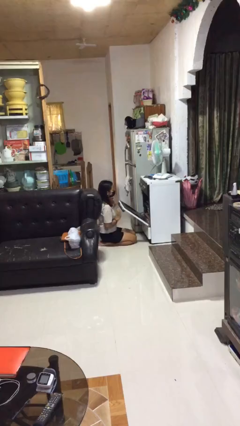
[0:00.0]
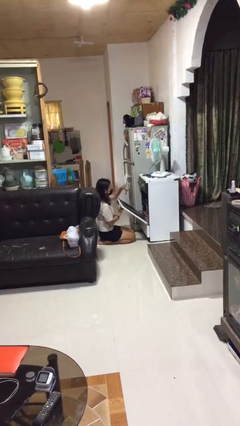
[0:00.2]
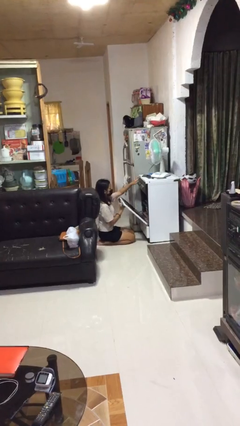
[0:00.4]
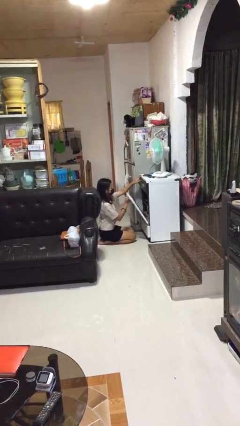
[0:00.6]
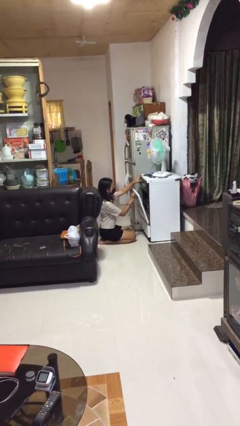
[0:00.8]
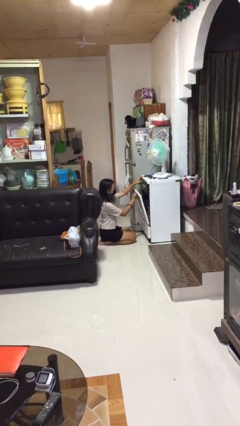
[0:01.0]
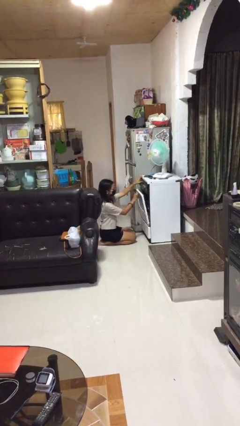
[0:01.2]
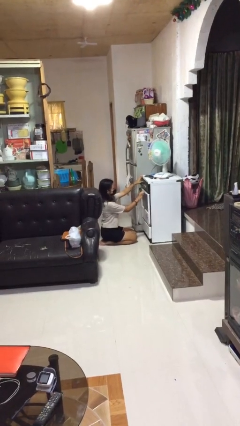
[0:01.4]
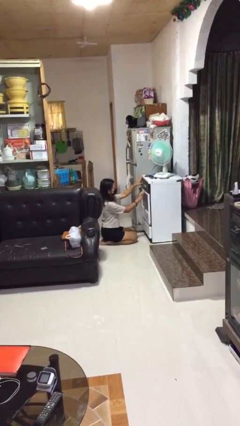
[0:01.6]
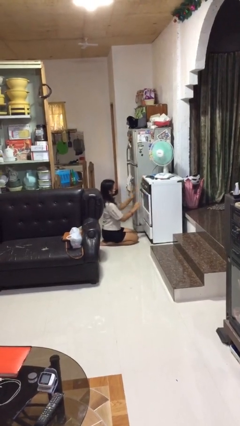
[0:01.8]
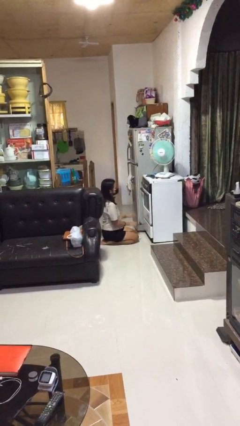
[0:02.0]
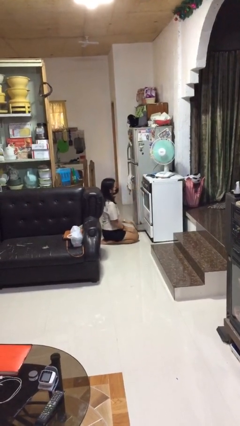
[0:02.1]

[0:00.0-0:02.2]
person closes oven door

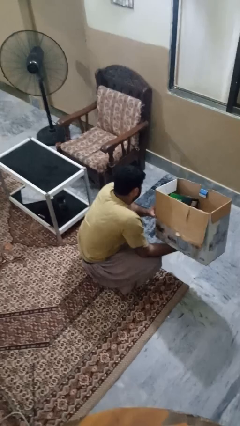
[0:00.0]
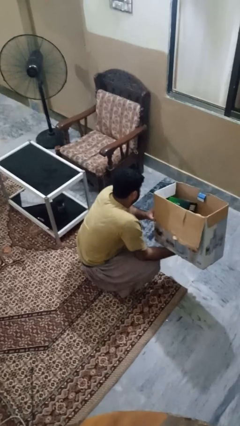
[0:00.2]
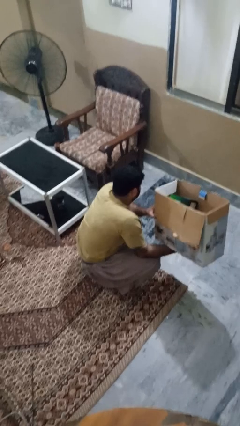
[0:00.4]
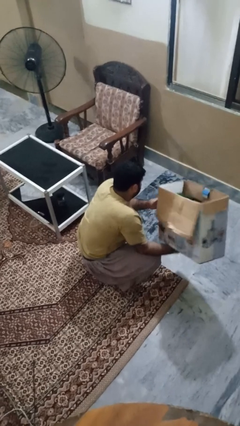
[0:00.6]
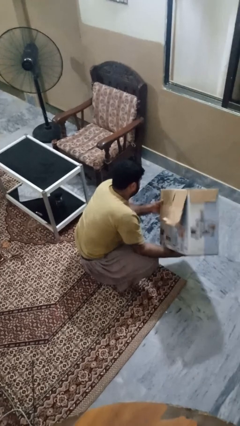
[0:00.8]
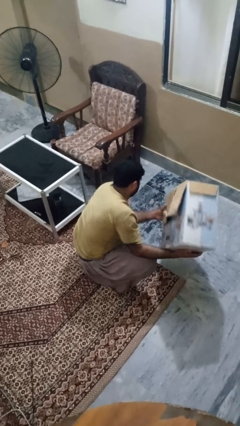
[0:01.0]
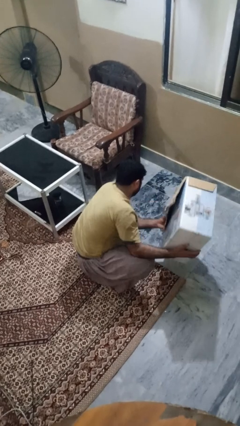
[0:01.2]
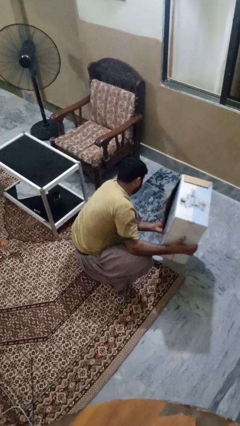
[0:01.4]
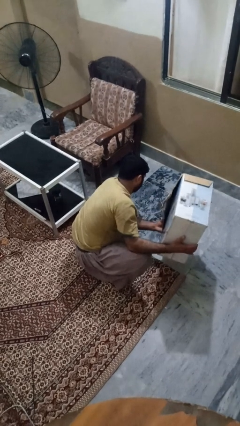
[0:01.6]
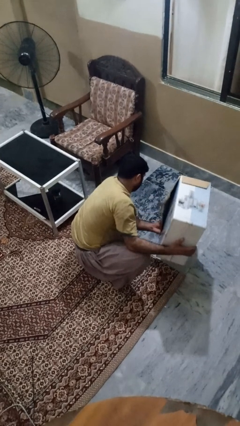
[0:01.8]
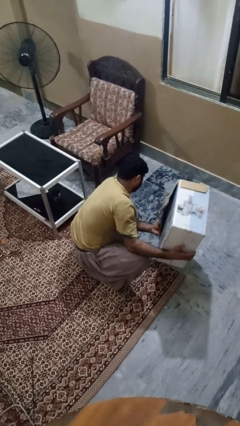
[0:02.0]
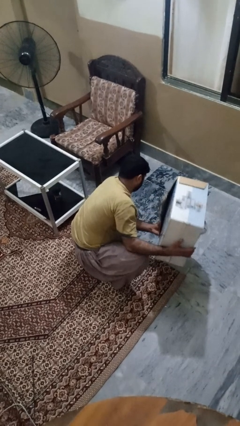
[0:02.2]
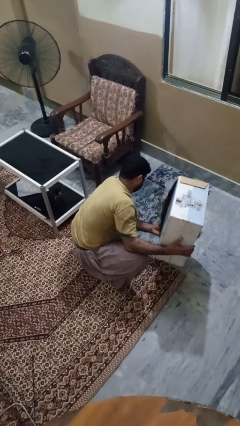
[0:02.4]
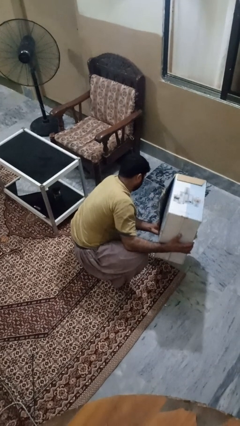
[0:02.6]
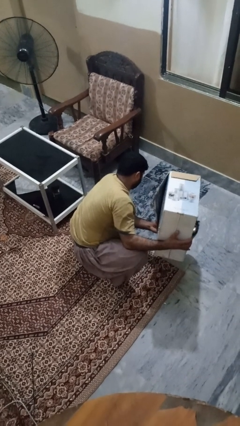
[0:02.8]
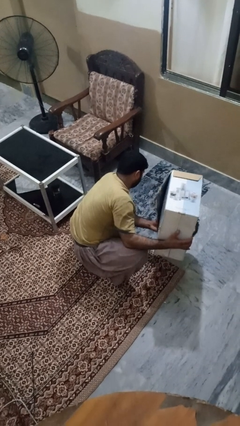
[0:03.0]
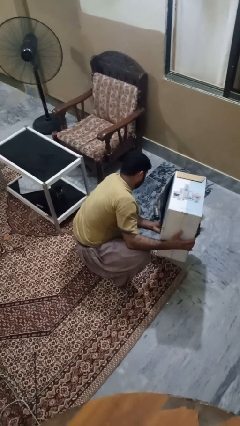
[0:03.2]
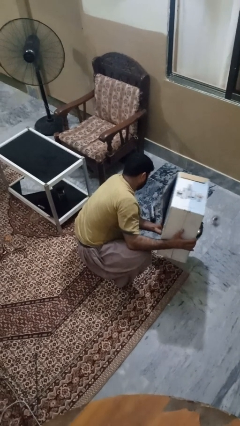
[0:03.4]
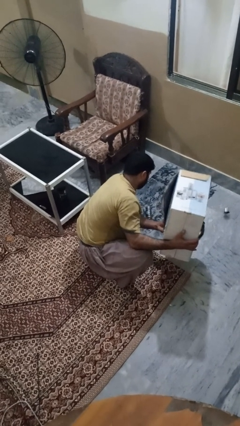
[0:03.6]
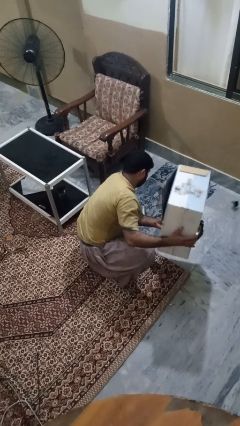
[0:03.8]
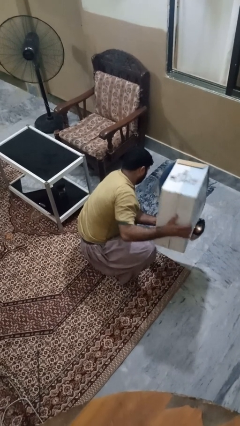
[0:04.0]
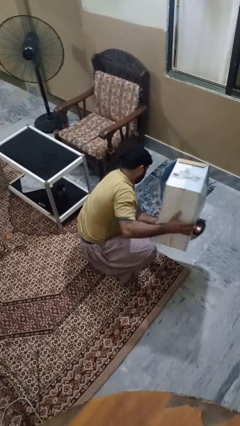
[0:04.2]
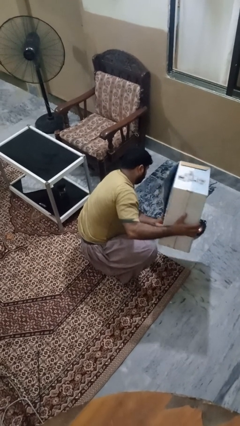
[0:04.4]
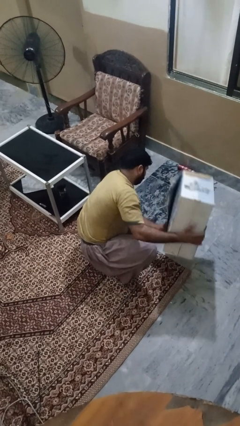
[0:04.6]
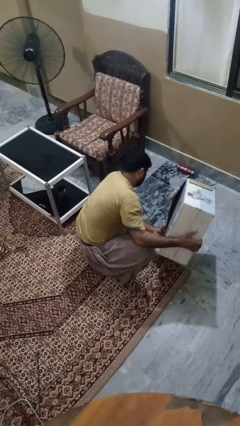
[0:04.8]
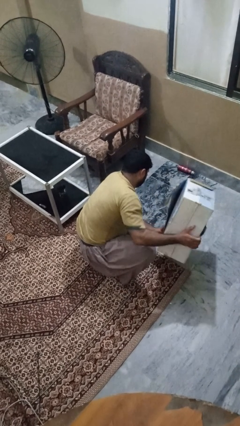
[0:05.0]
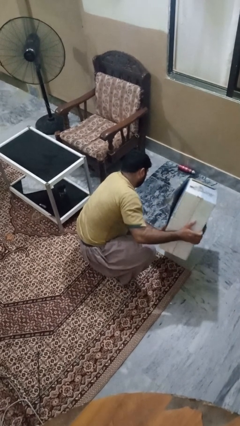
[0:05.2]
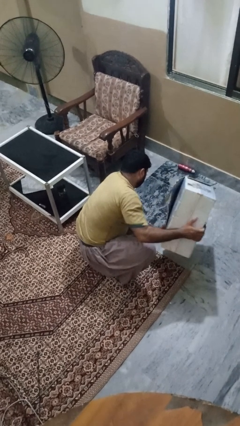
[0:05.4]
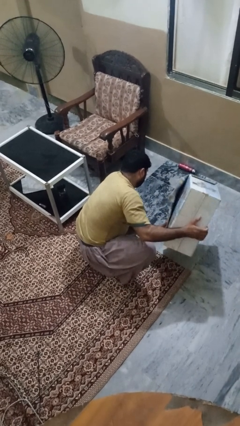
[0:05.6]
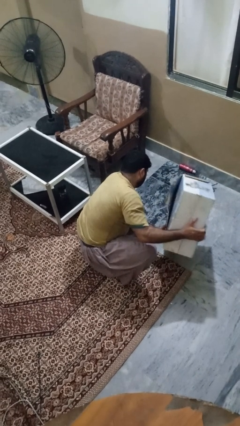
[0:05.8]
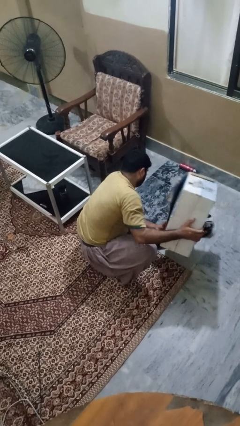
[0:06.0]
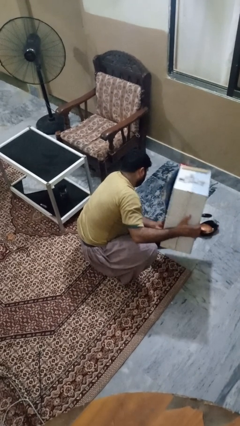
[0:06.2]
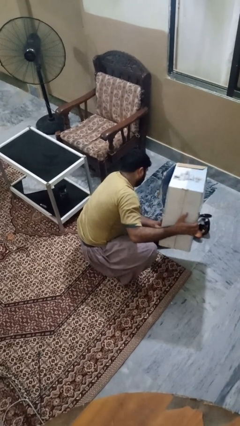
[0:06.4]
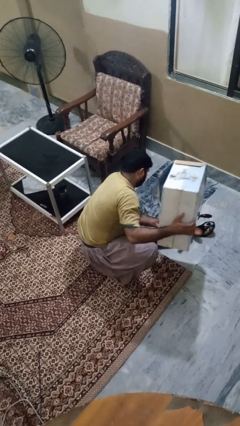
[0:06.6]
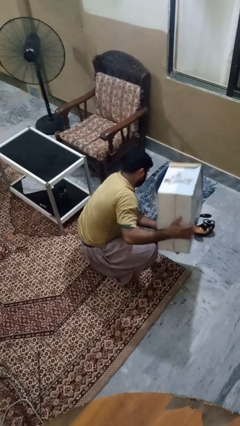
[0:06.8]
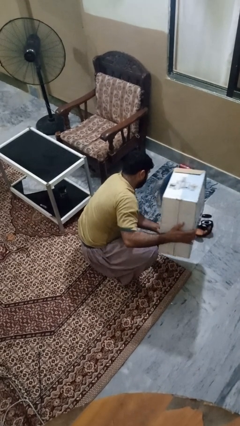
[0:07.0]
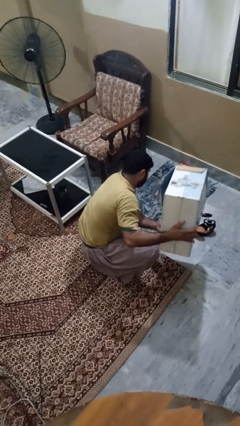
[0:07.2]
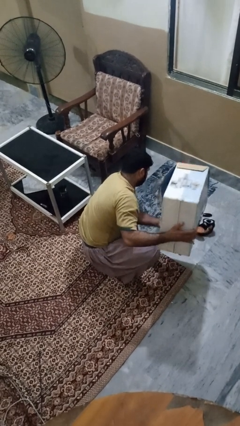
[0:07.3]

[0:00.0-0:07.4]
person unloads box onto floor

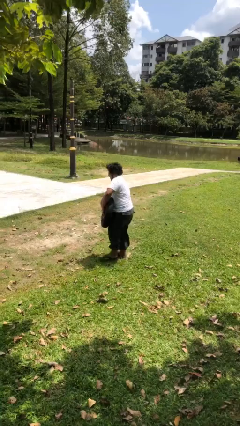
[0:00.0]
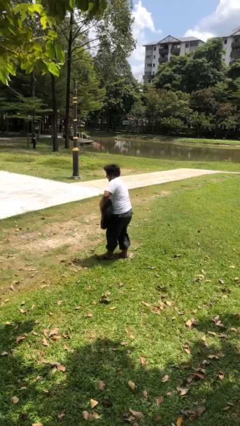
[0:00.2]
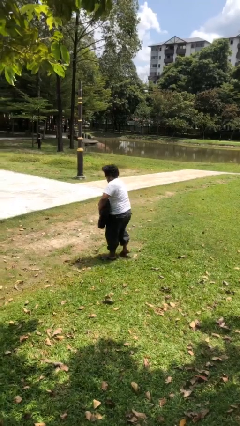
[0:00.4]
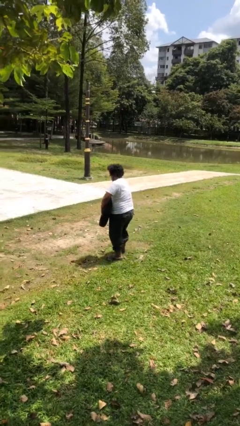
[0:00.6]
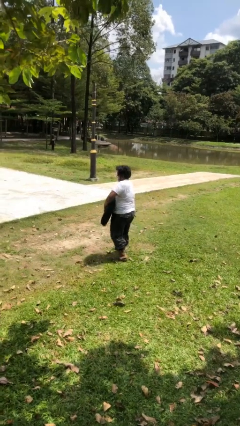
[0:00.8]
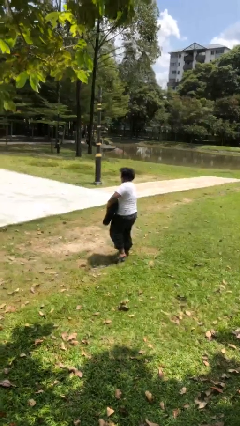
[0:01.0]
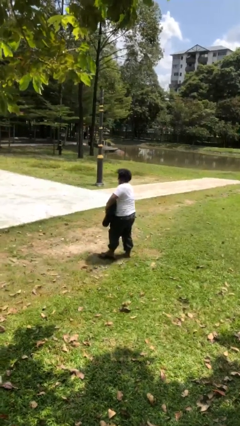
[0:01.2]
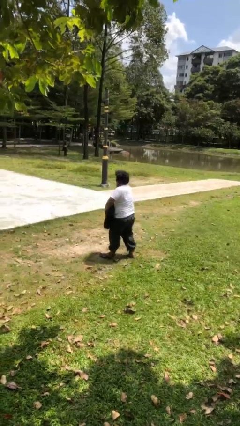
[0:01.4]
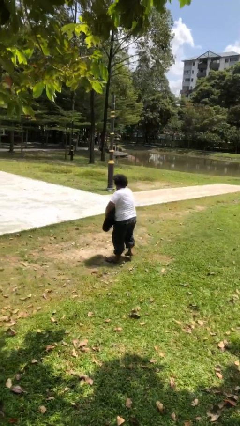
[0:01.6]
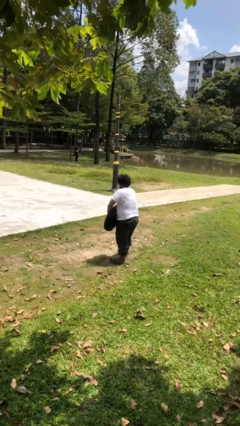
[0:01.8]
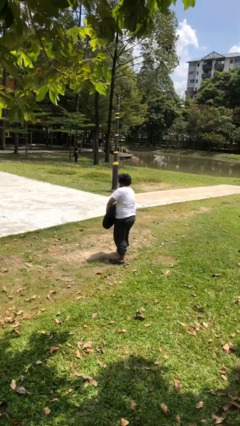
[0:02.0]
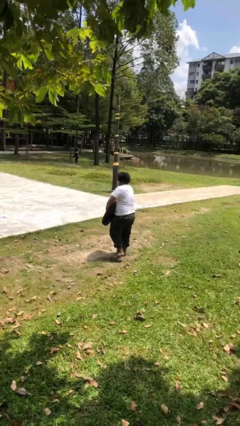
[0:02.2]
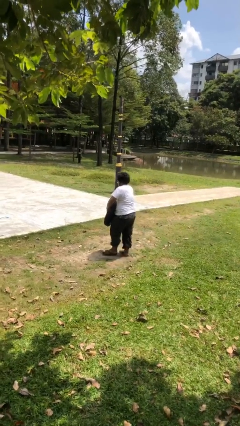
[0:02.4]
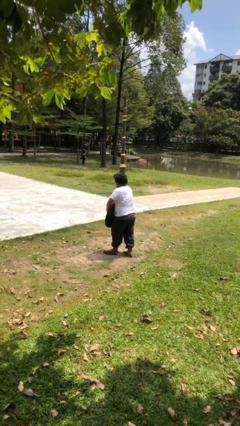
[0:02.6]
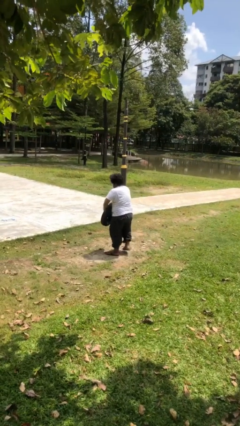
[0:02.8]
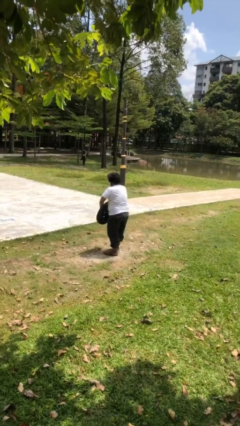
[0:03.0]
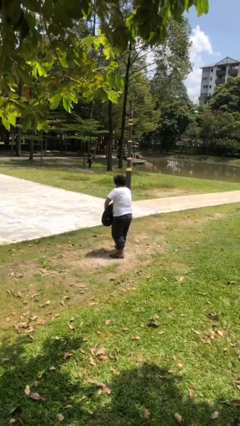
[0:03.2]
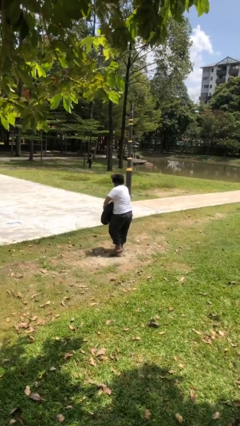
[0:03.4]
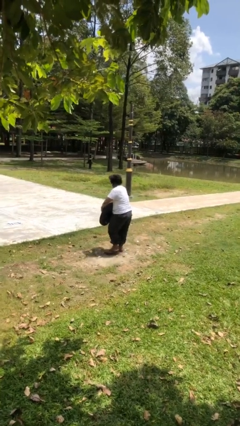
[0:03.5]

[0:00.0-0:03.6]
person carries heavy object

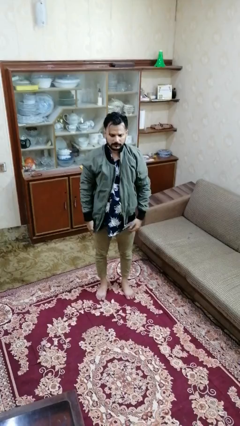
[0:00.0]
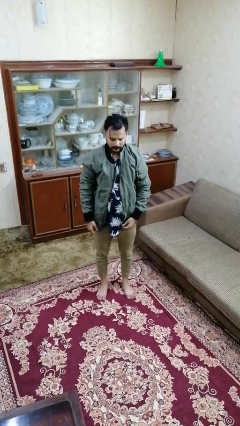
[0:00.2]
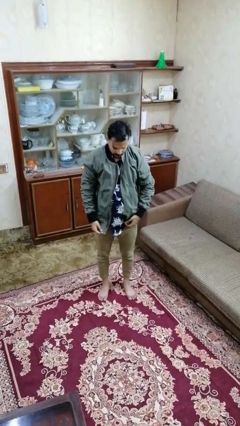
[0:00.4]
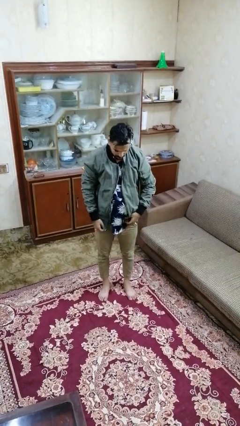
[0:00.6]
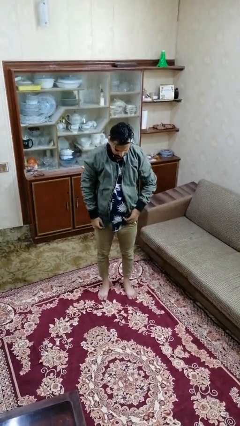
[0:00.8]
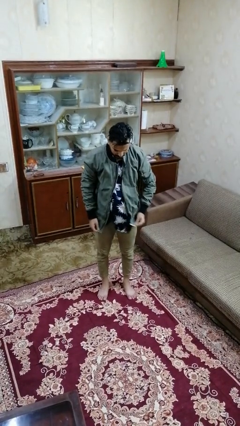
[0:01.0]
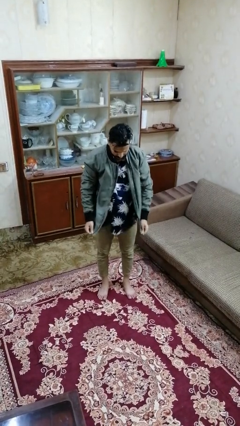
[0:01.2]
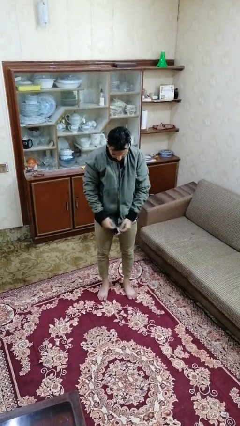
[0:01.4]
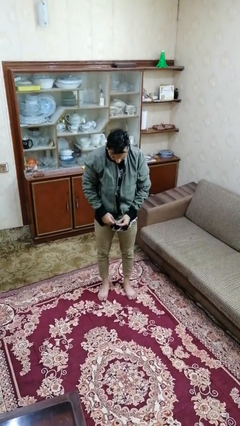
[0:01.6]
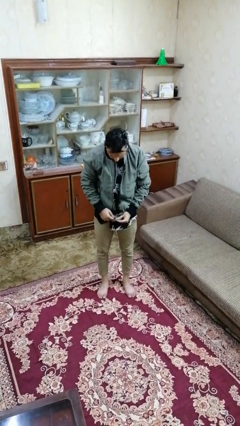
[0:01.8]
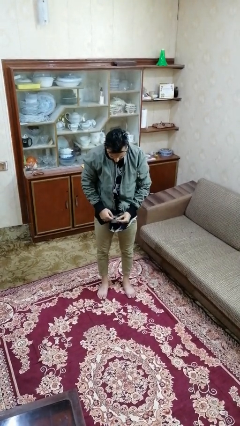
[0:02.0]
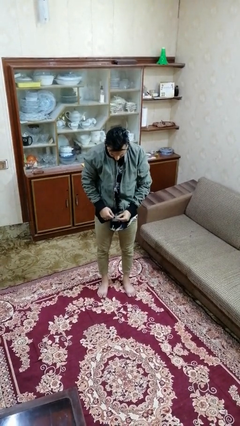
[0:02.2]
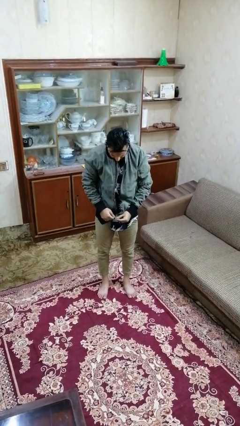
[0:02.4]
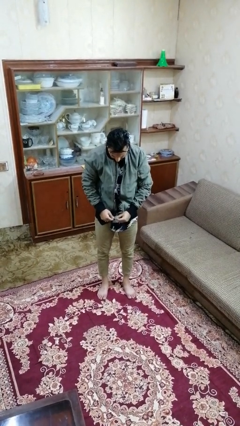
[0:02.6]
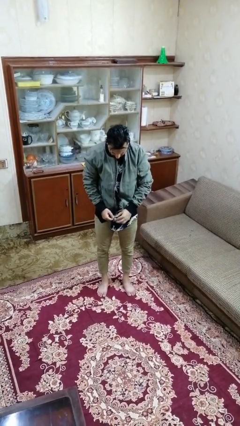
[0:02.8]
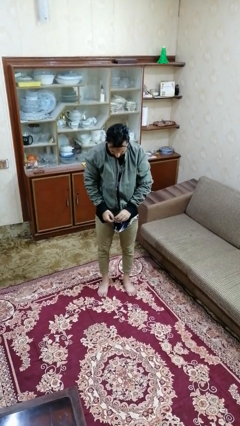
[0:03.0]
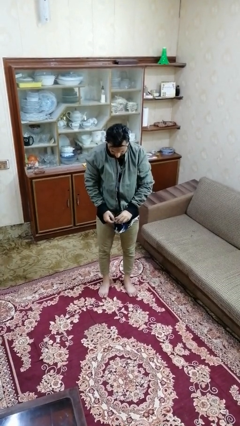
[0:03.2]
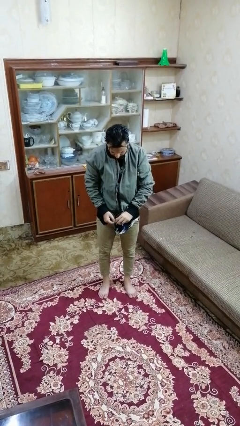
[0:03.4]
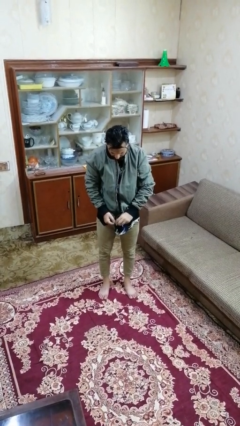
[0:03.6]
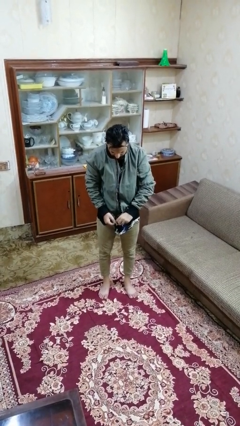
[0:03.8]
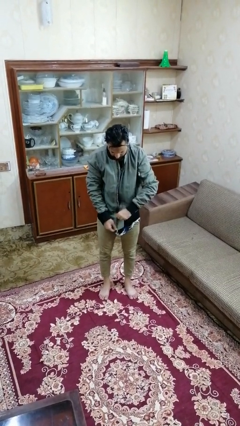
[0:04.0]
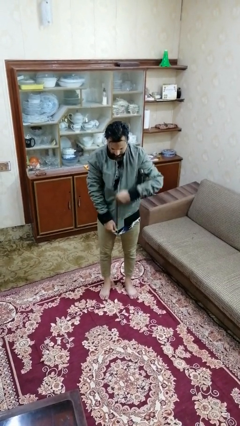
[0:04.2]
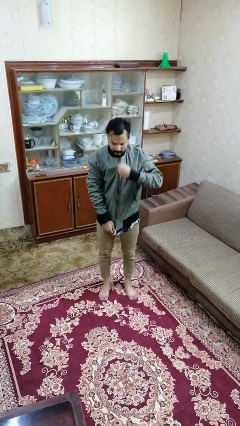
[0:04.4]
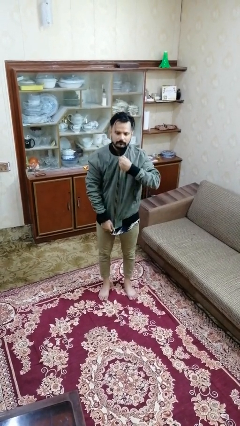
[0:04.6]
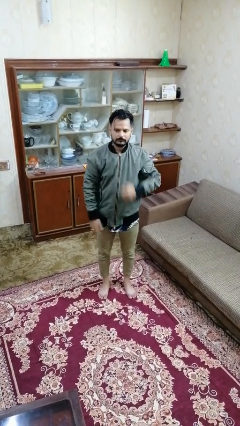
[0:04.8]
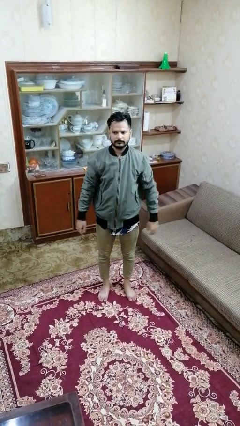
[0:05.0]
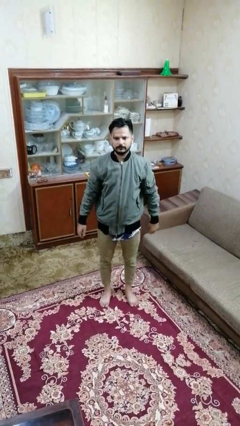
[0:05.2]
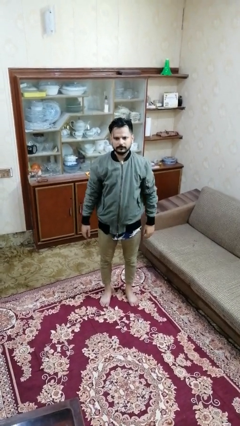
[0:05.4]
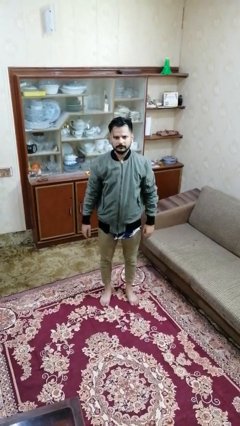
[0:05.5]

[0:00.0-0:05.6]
person zips up jacket
